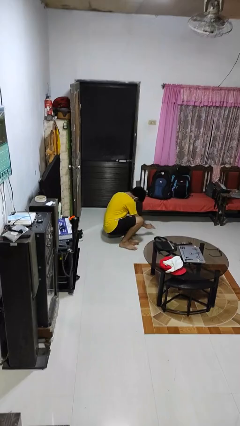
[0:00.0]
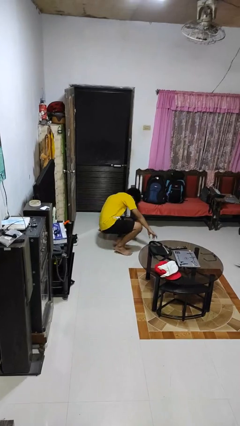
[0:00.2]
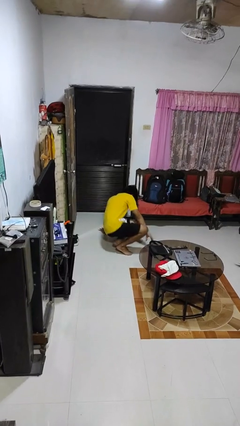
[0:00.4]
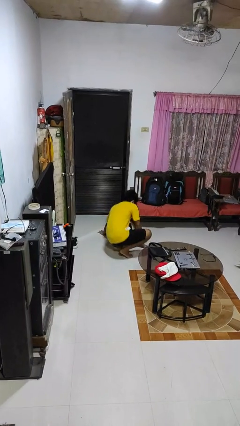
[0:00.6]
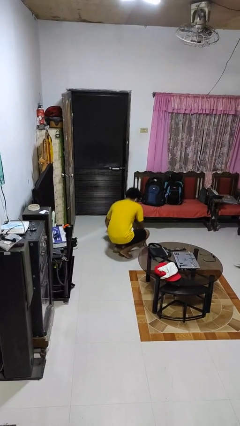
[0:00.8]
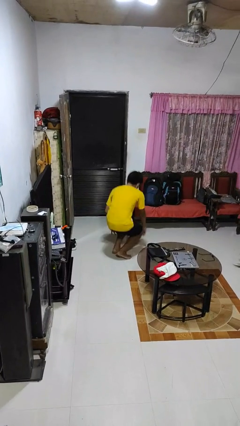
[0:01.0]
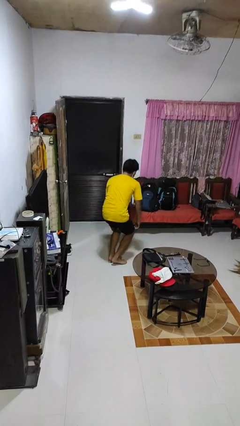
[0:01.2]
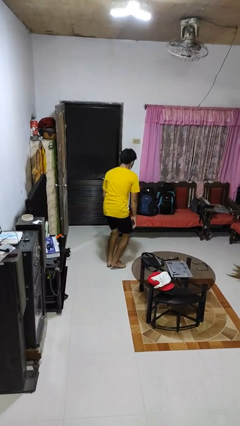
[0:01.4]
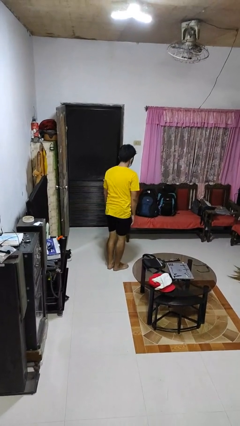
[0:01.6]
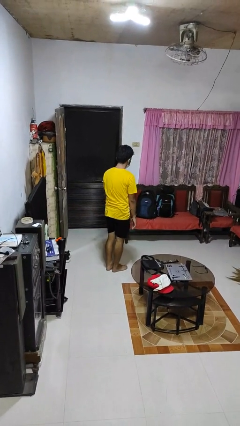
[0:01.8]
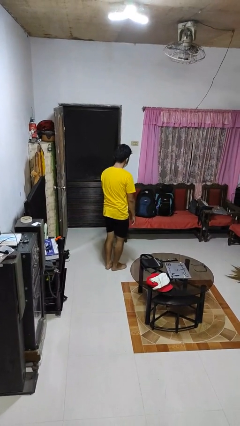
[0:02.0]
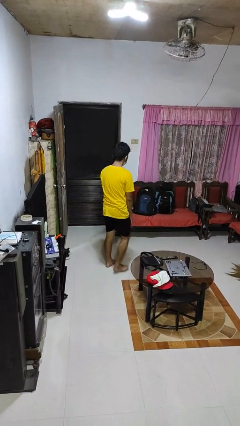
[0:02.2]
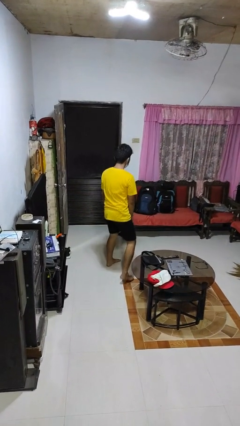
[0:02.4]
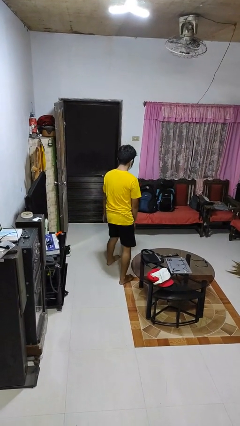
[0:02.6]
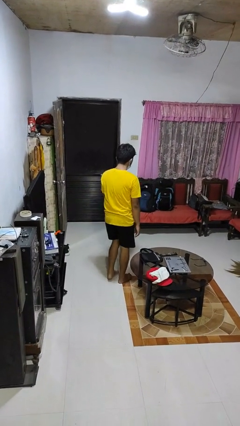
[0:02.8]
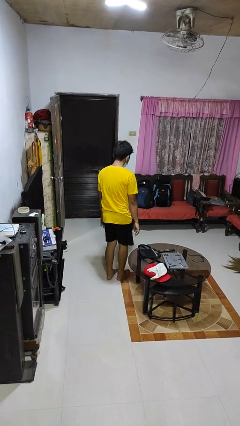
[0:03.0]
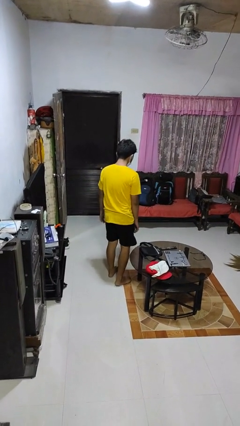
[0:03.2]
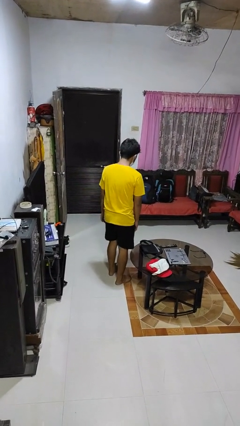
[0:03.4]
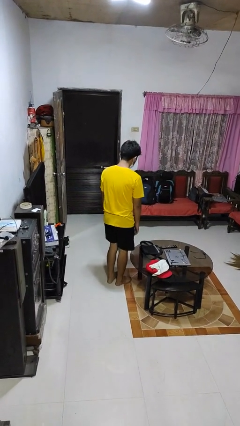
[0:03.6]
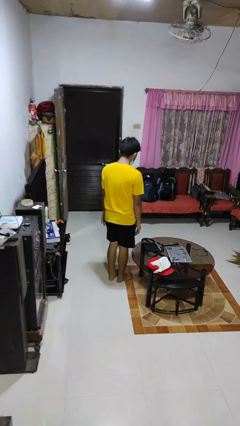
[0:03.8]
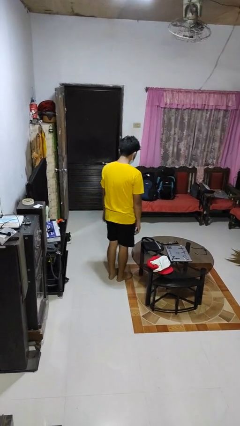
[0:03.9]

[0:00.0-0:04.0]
person stands up from floor

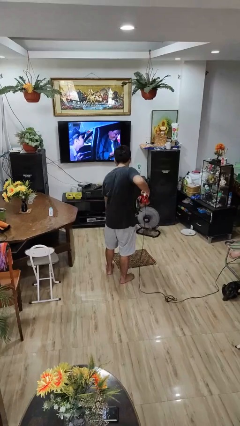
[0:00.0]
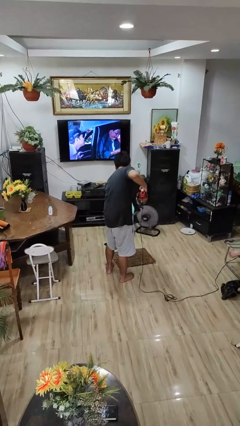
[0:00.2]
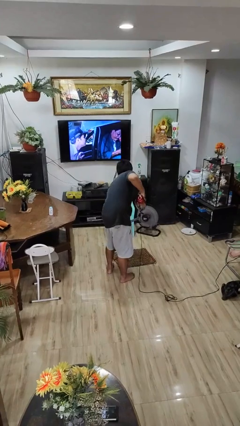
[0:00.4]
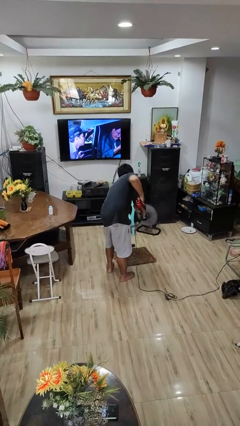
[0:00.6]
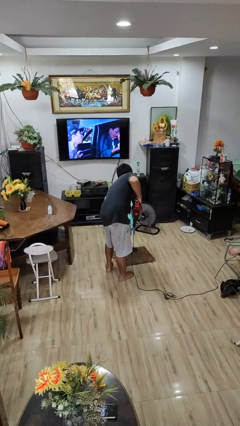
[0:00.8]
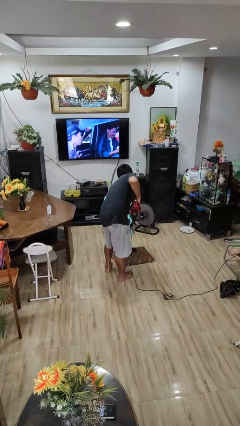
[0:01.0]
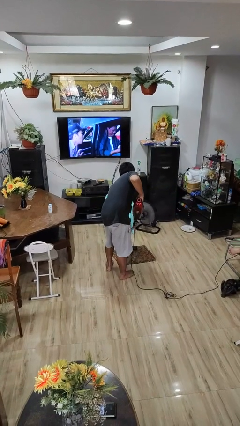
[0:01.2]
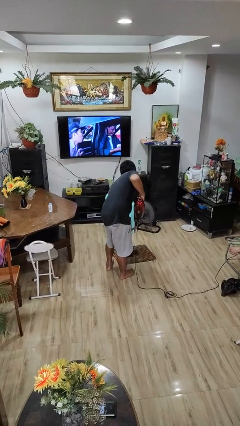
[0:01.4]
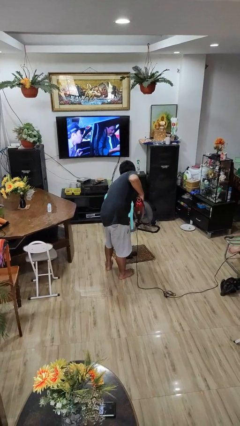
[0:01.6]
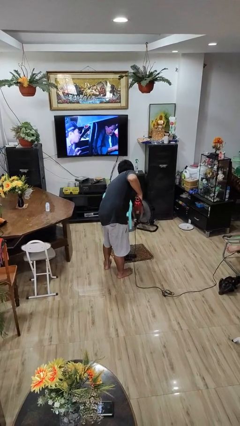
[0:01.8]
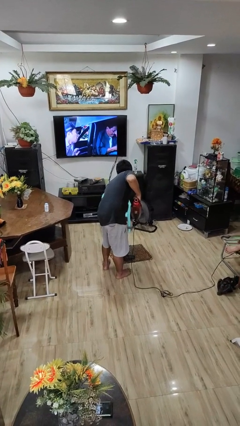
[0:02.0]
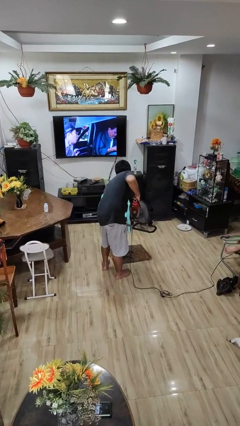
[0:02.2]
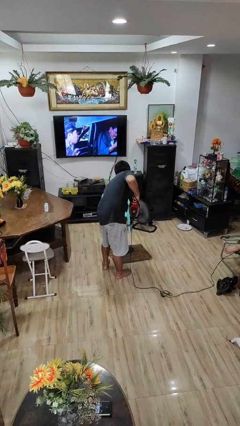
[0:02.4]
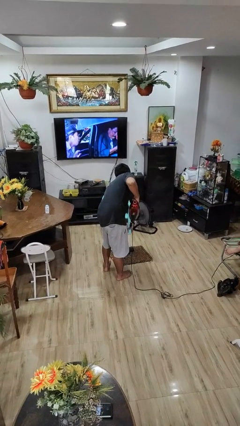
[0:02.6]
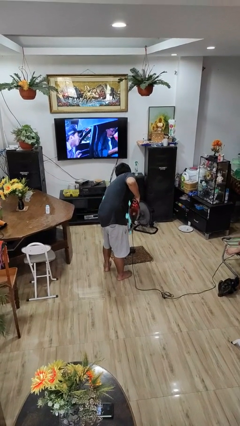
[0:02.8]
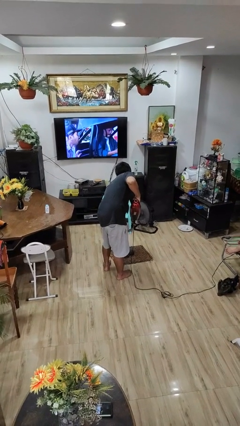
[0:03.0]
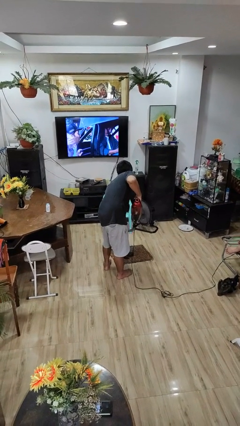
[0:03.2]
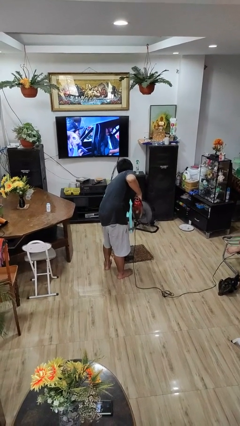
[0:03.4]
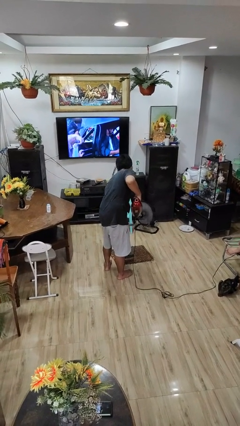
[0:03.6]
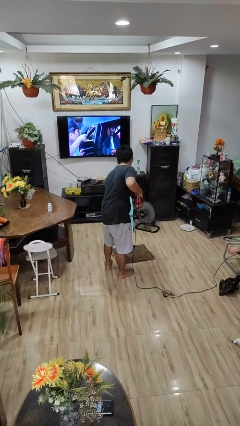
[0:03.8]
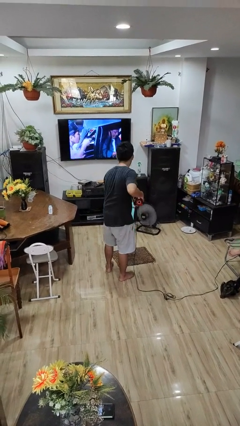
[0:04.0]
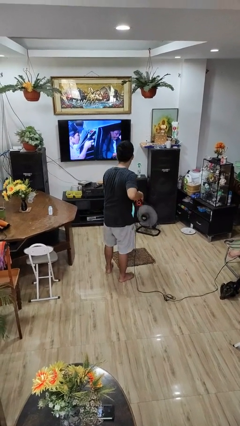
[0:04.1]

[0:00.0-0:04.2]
person vacuums carpet

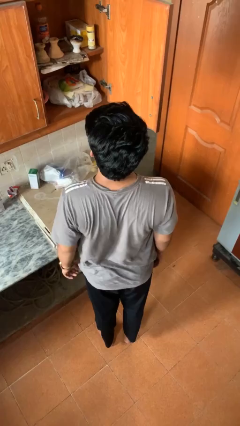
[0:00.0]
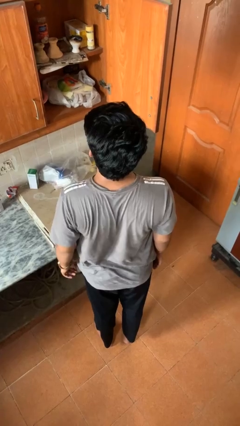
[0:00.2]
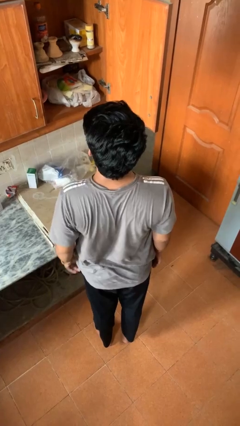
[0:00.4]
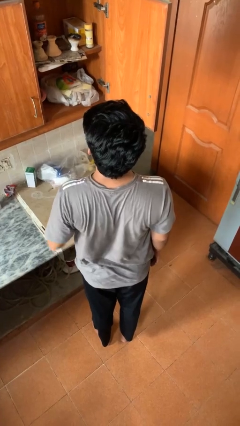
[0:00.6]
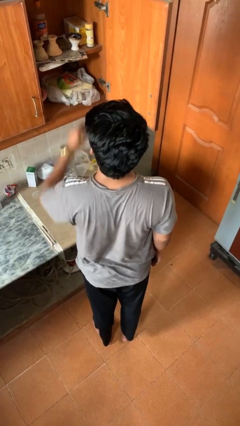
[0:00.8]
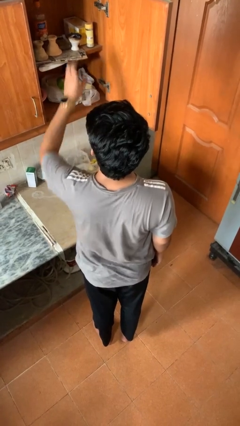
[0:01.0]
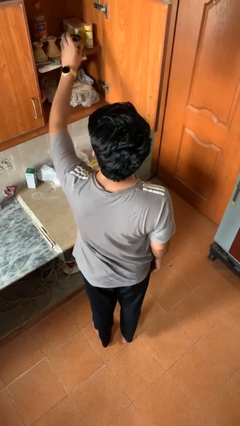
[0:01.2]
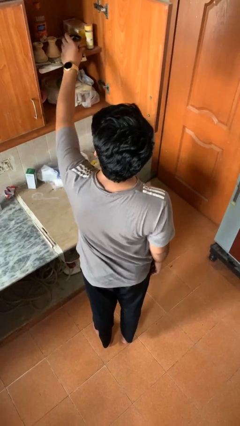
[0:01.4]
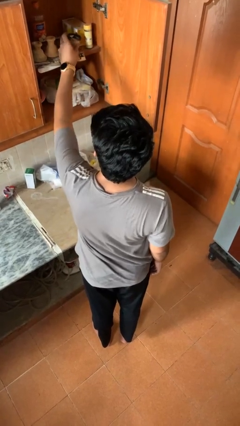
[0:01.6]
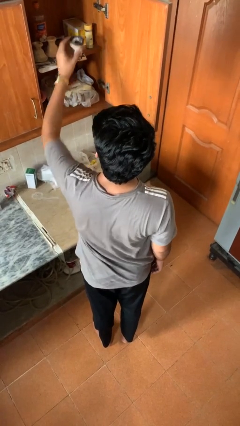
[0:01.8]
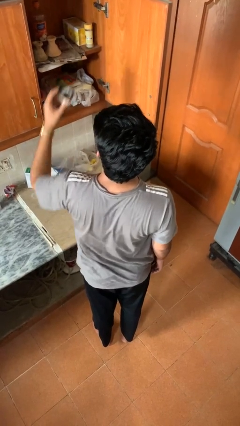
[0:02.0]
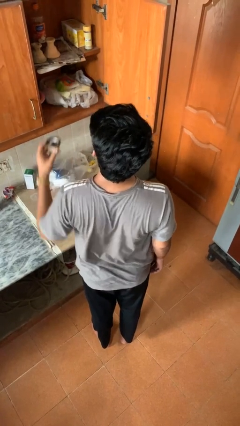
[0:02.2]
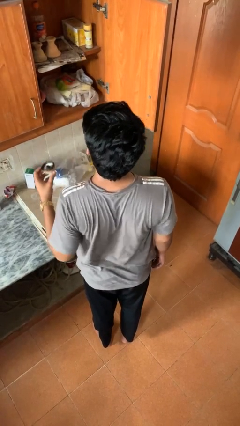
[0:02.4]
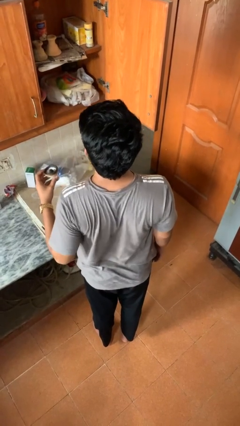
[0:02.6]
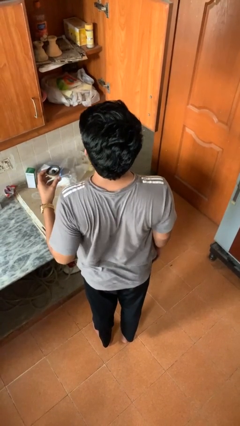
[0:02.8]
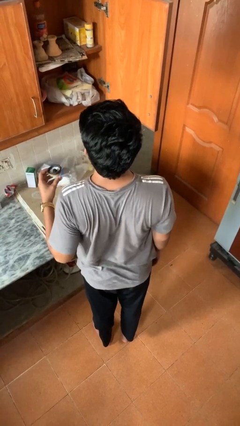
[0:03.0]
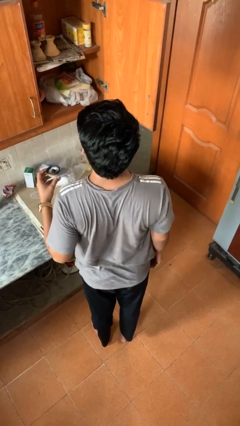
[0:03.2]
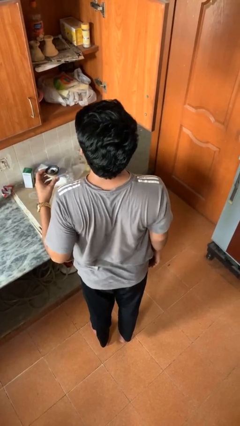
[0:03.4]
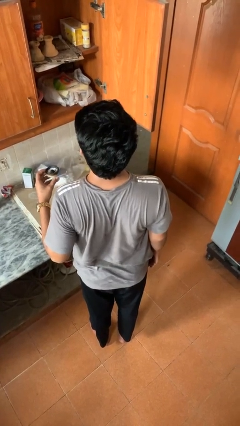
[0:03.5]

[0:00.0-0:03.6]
person takes object from cabinet

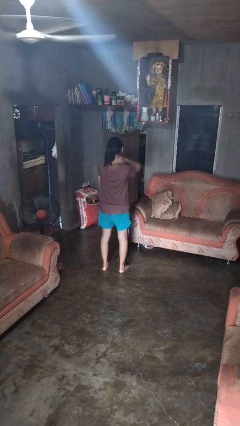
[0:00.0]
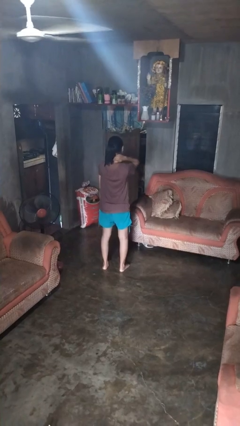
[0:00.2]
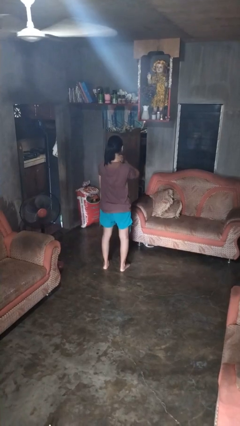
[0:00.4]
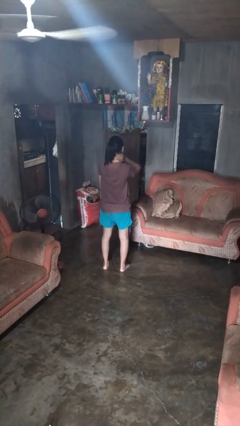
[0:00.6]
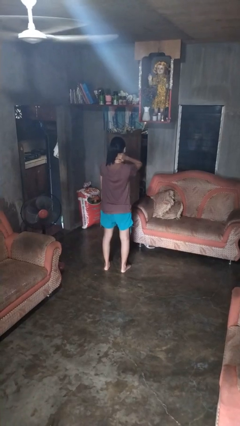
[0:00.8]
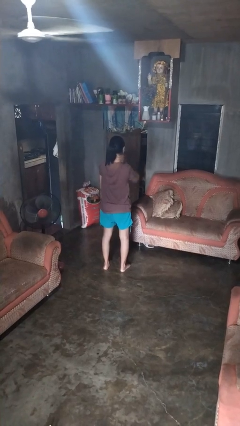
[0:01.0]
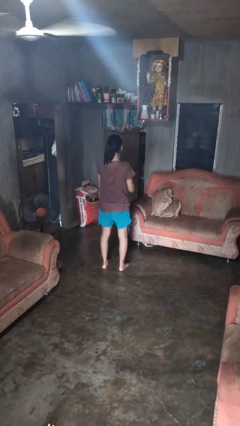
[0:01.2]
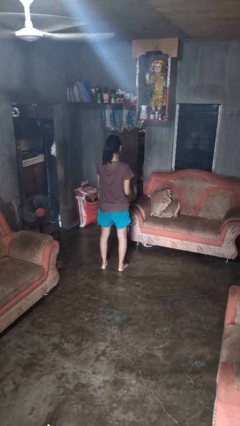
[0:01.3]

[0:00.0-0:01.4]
person rubs neck

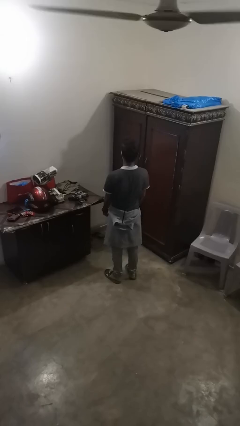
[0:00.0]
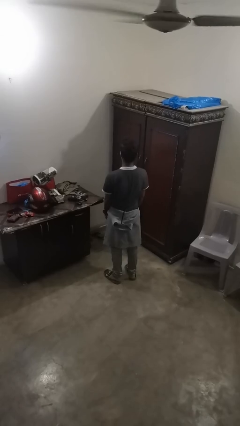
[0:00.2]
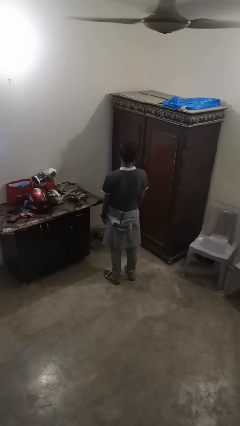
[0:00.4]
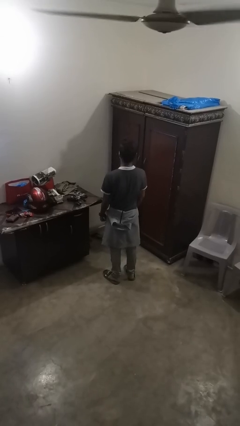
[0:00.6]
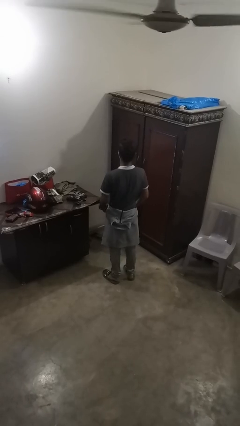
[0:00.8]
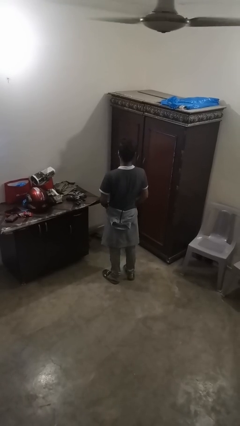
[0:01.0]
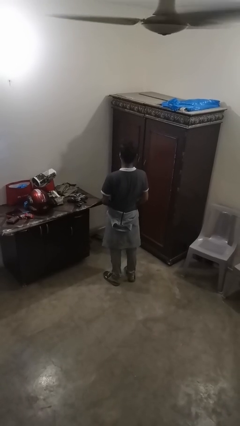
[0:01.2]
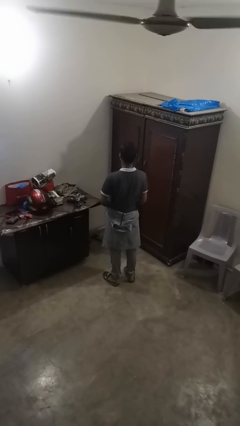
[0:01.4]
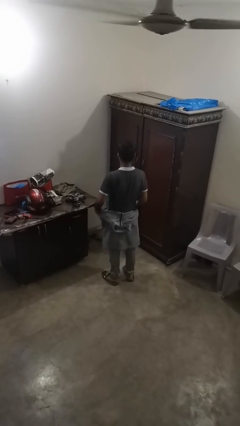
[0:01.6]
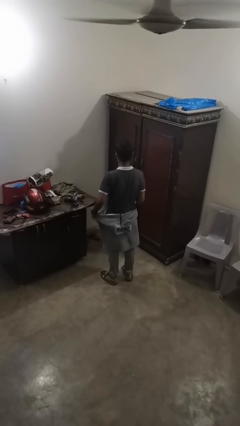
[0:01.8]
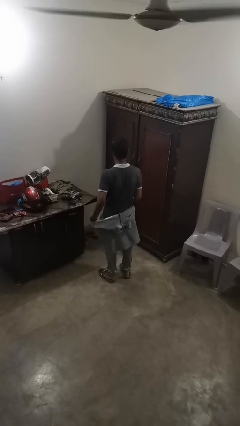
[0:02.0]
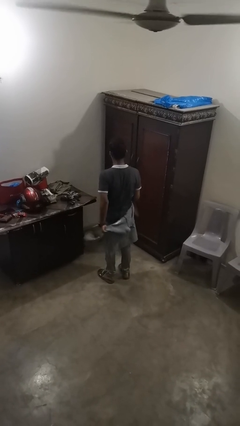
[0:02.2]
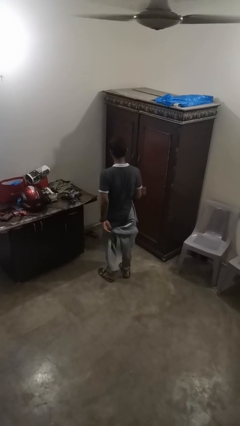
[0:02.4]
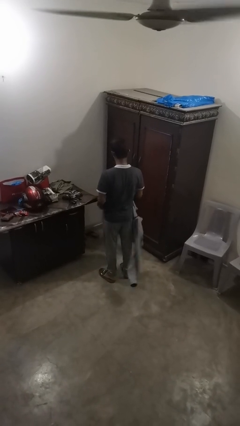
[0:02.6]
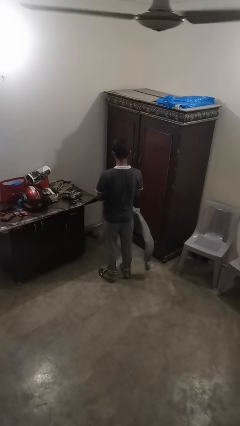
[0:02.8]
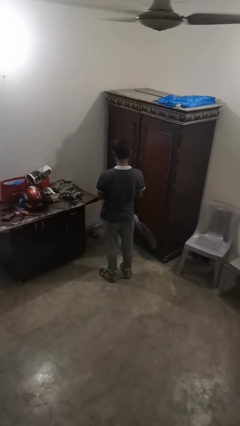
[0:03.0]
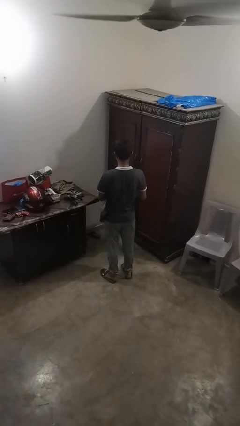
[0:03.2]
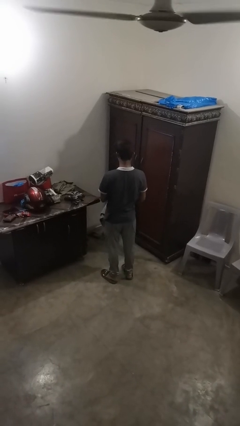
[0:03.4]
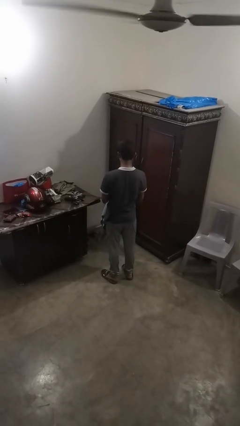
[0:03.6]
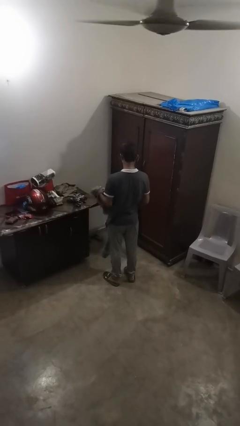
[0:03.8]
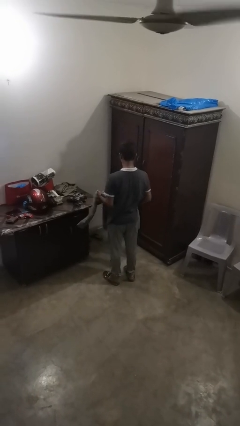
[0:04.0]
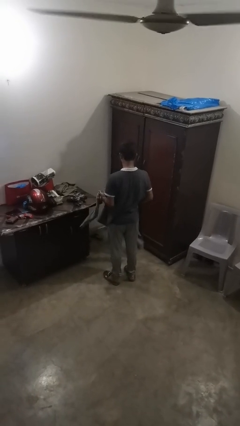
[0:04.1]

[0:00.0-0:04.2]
person unties jacket around waist
